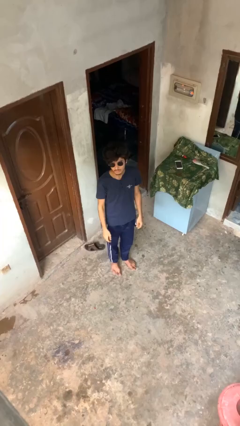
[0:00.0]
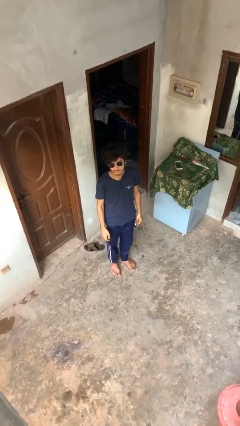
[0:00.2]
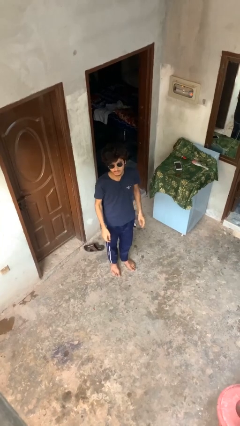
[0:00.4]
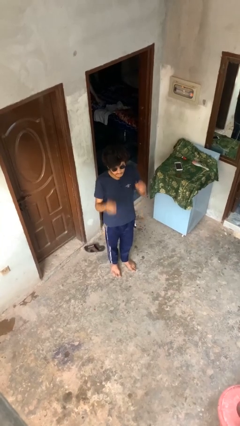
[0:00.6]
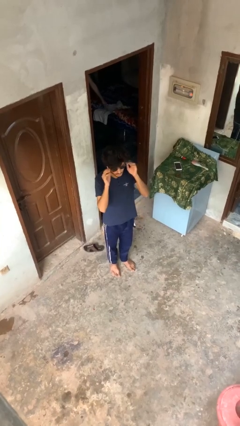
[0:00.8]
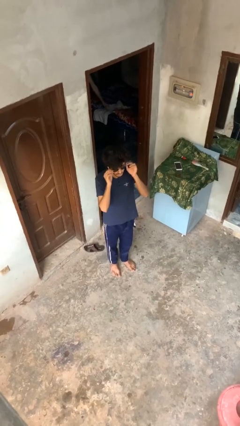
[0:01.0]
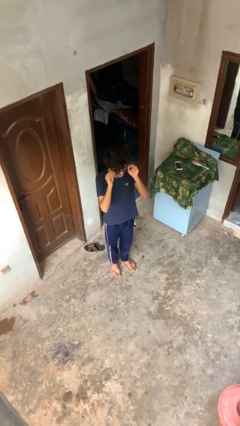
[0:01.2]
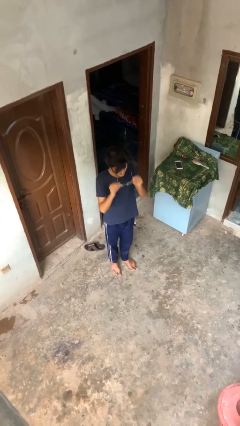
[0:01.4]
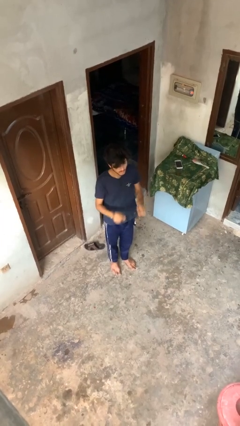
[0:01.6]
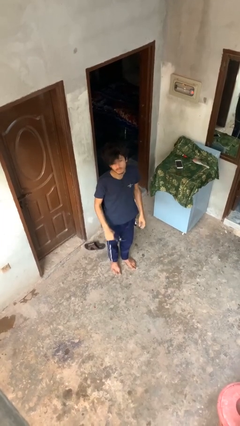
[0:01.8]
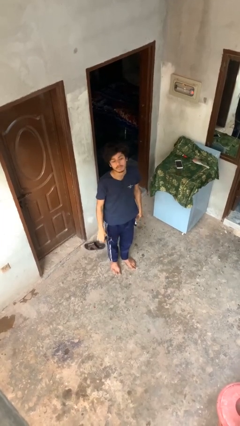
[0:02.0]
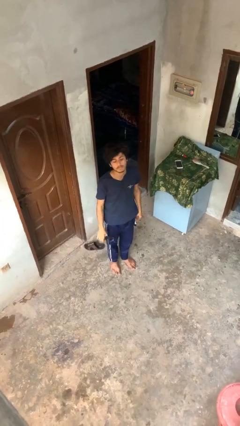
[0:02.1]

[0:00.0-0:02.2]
person takes off sunglasses

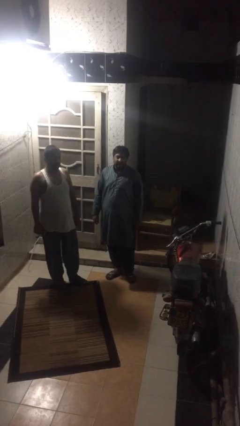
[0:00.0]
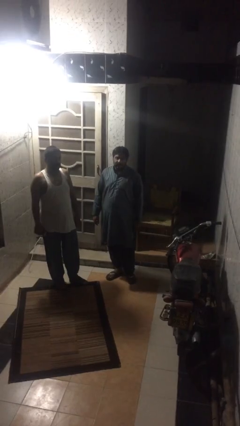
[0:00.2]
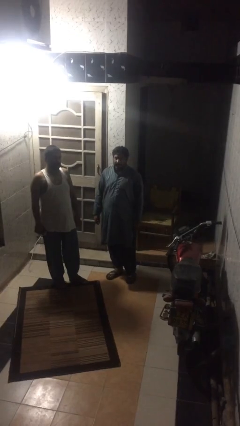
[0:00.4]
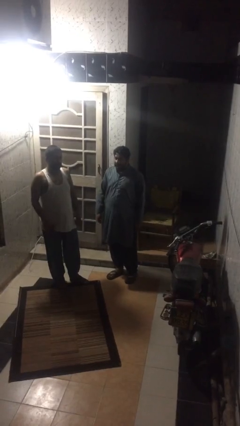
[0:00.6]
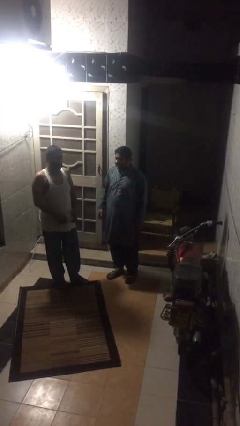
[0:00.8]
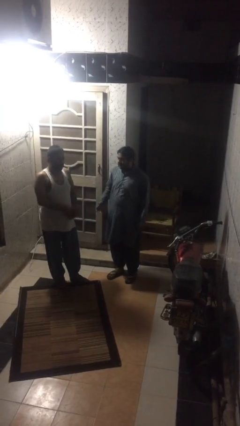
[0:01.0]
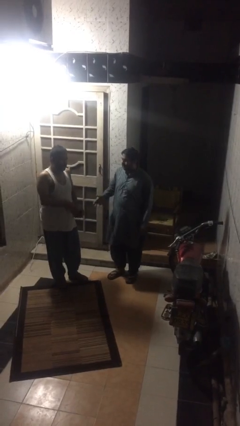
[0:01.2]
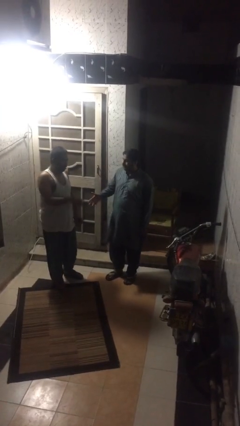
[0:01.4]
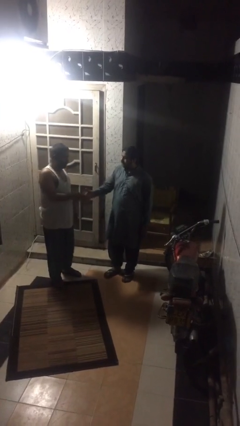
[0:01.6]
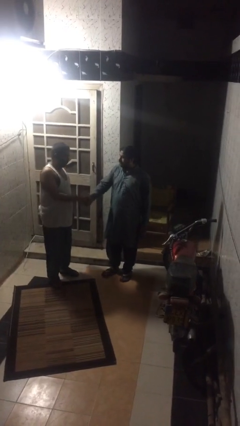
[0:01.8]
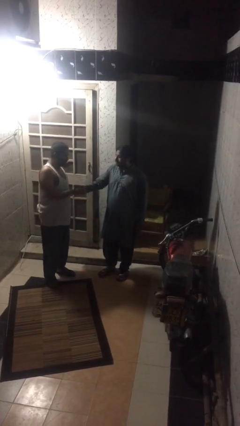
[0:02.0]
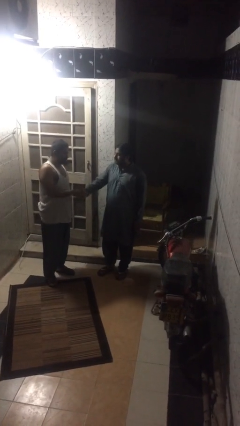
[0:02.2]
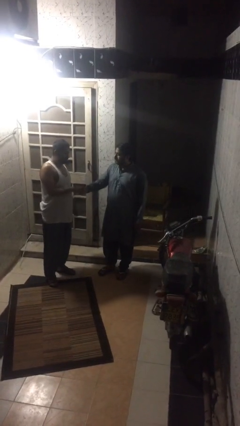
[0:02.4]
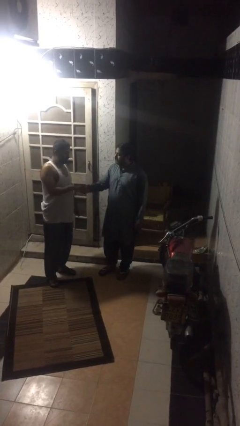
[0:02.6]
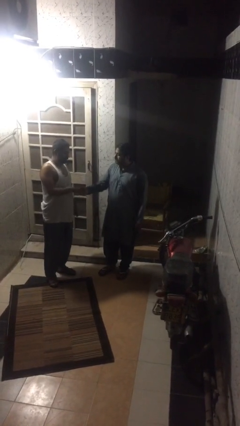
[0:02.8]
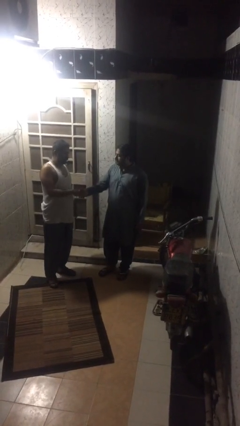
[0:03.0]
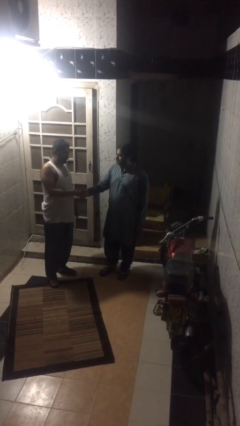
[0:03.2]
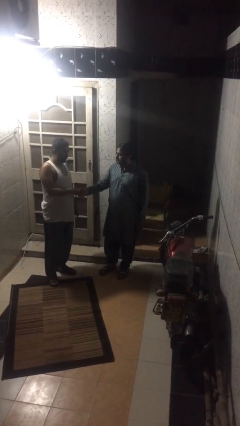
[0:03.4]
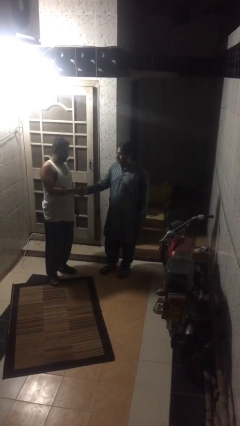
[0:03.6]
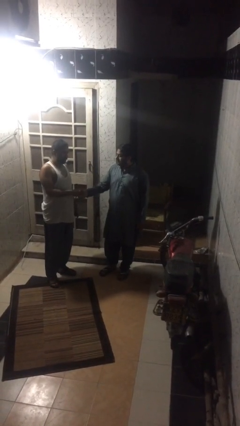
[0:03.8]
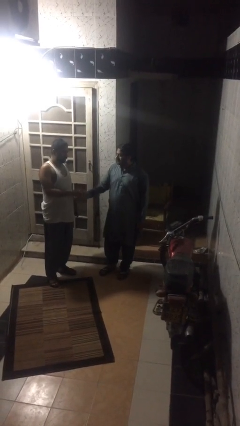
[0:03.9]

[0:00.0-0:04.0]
person shakes hand

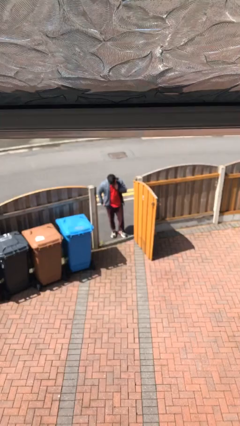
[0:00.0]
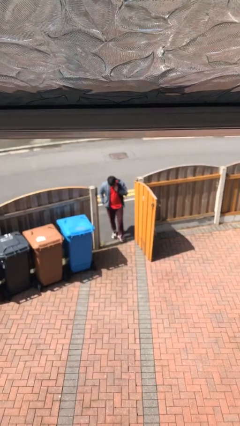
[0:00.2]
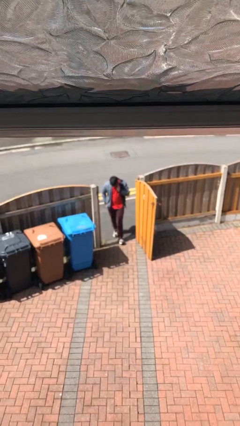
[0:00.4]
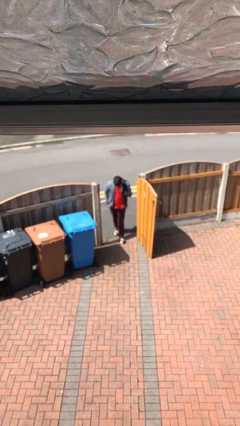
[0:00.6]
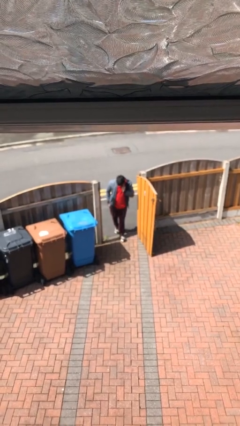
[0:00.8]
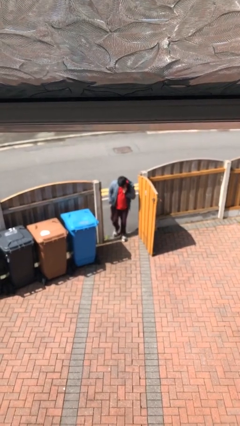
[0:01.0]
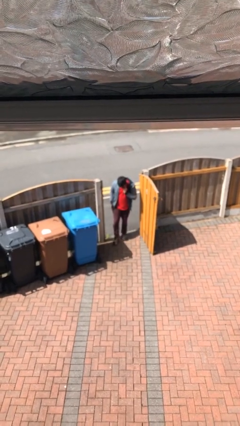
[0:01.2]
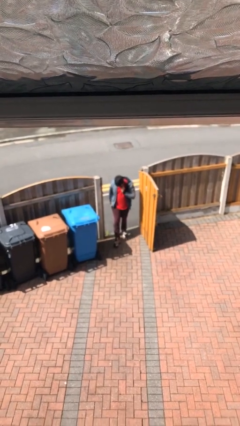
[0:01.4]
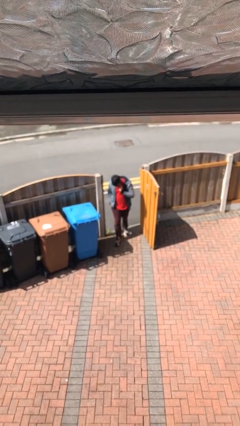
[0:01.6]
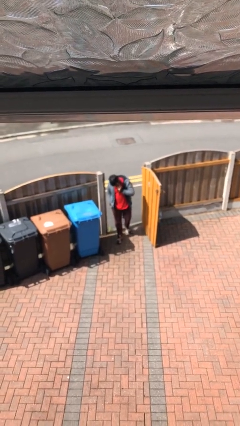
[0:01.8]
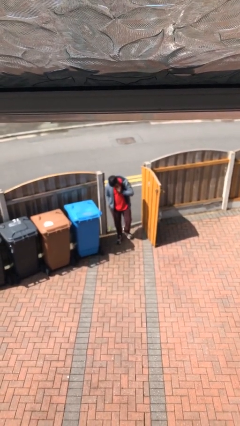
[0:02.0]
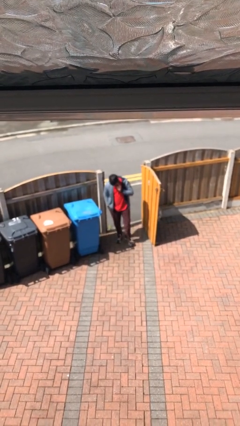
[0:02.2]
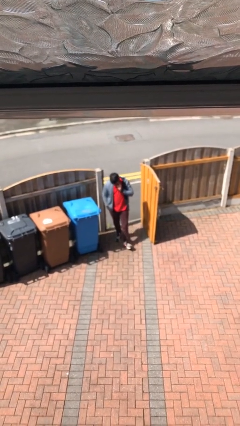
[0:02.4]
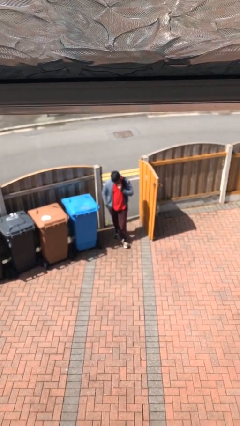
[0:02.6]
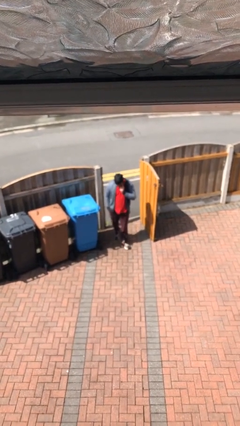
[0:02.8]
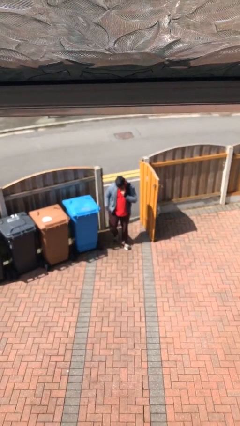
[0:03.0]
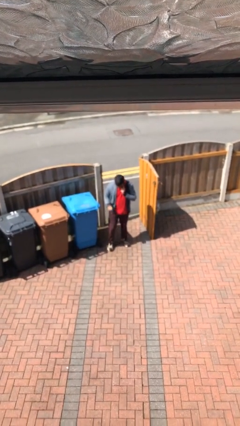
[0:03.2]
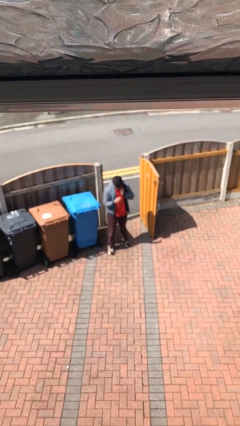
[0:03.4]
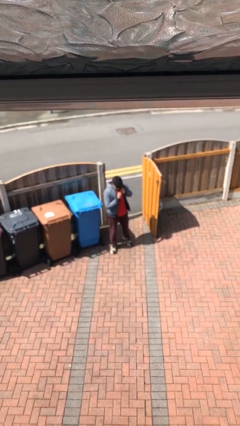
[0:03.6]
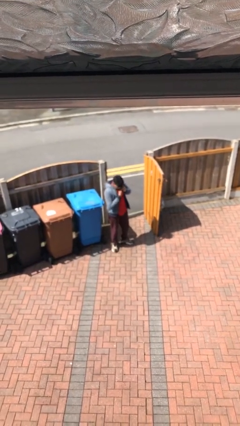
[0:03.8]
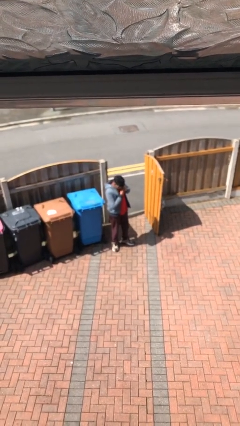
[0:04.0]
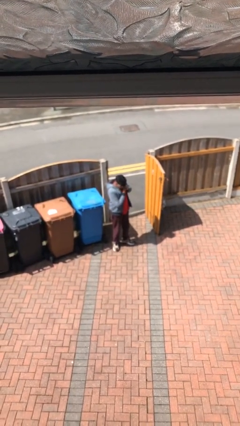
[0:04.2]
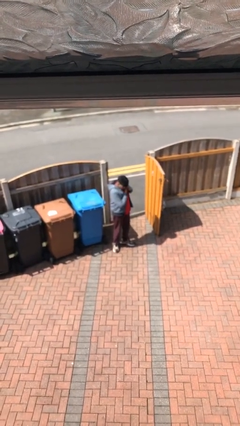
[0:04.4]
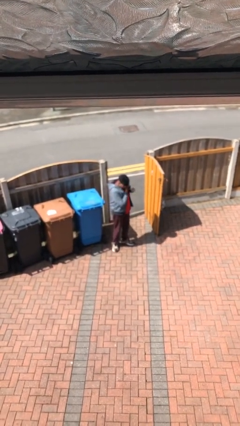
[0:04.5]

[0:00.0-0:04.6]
person enters scene through structure

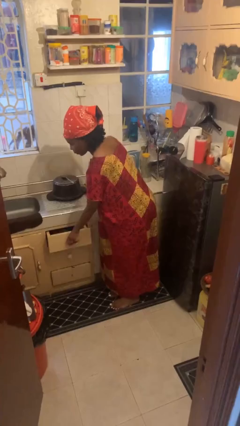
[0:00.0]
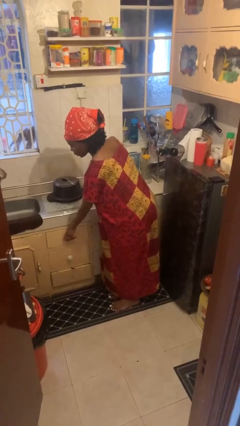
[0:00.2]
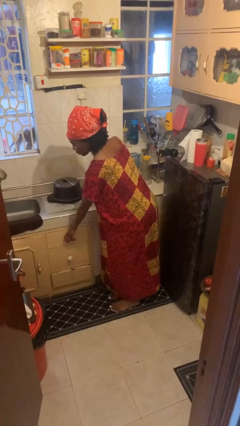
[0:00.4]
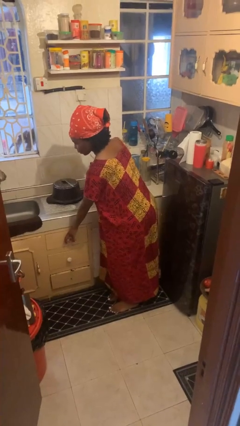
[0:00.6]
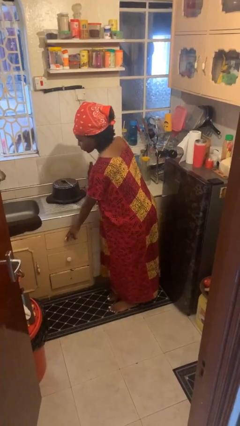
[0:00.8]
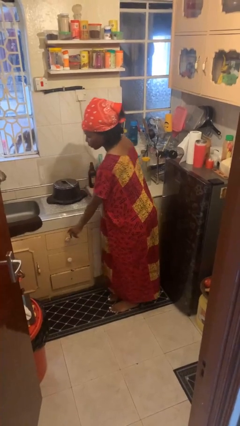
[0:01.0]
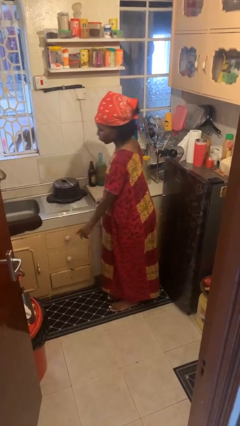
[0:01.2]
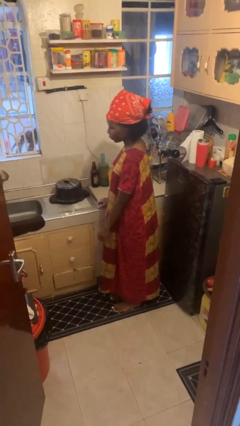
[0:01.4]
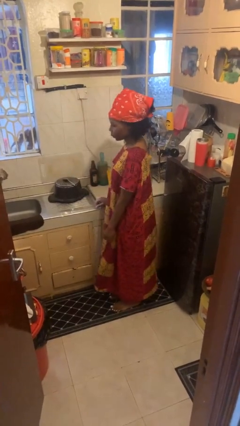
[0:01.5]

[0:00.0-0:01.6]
person closes kitchen drawer

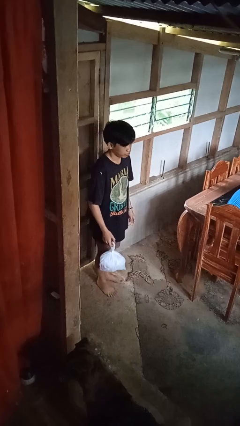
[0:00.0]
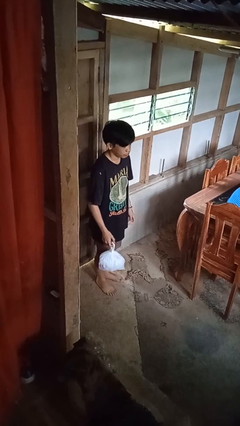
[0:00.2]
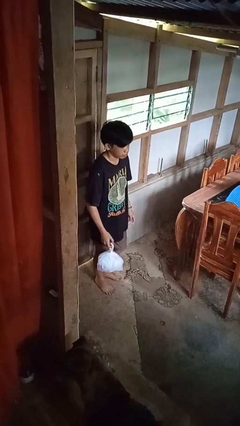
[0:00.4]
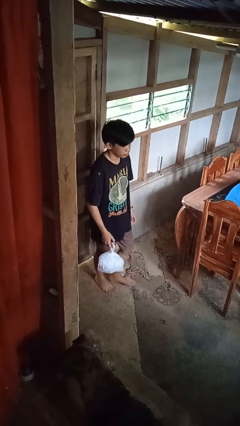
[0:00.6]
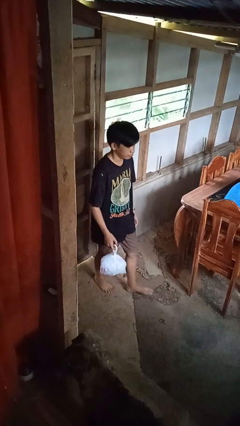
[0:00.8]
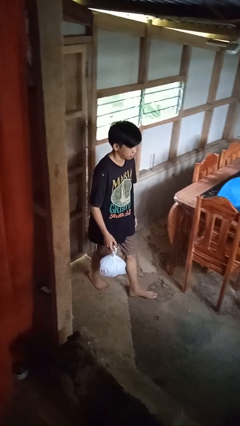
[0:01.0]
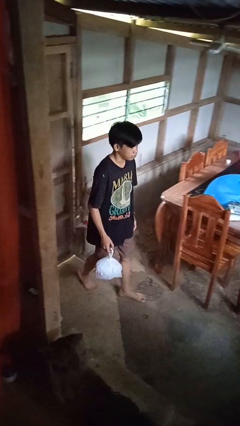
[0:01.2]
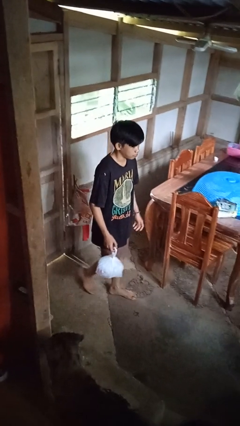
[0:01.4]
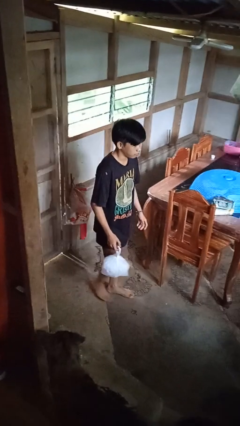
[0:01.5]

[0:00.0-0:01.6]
person carries groceries

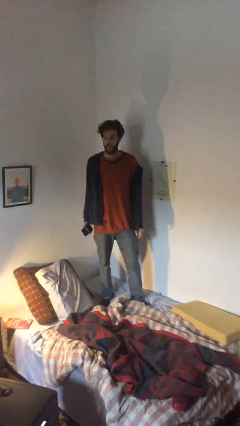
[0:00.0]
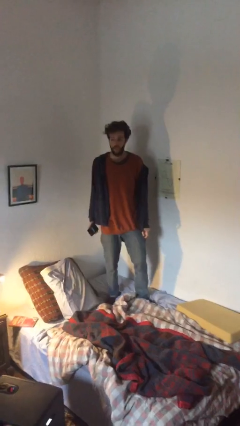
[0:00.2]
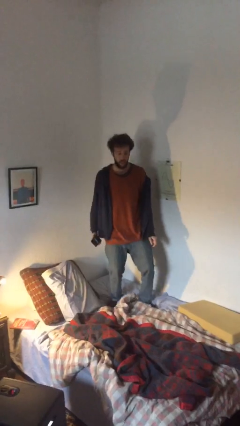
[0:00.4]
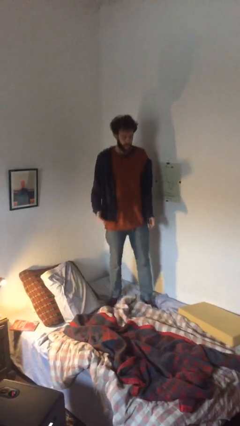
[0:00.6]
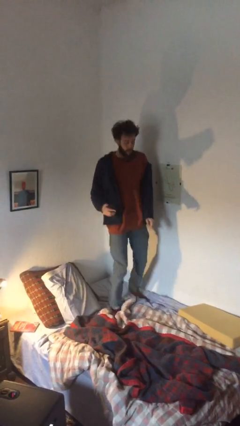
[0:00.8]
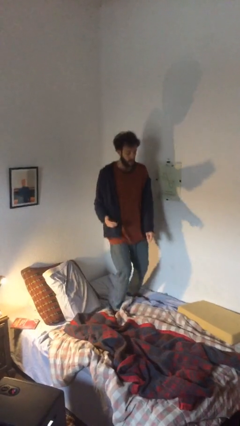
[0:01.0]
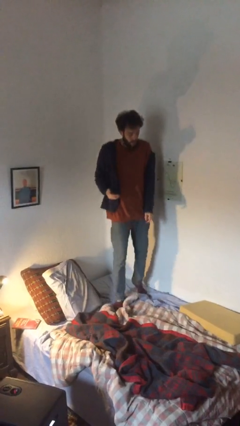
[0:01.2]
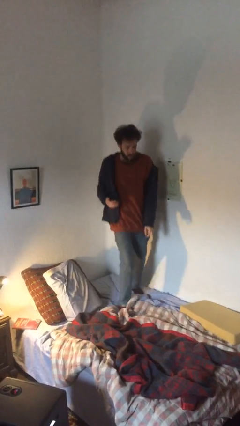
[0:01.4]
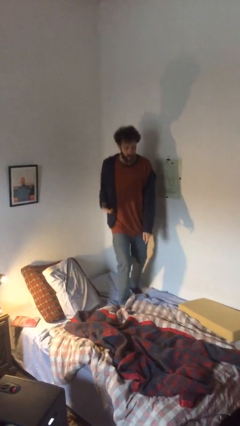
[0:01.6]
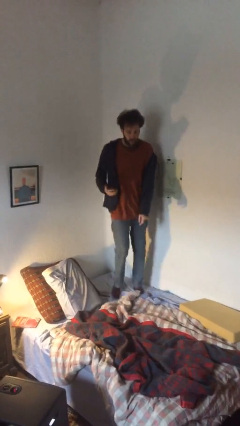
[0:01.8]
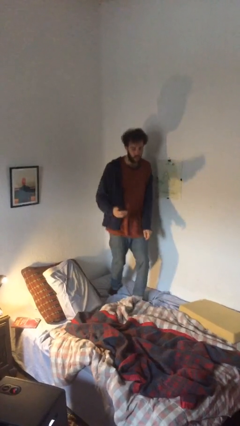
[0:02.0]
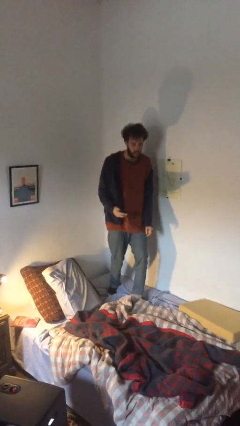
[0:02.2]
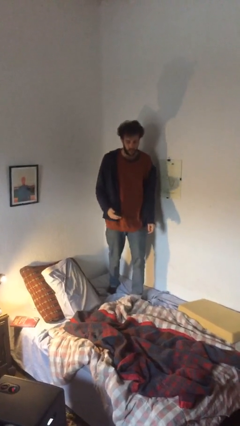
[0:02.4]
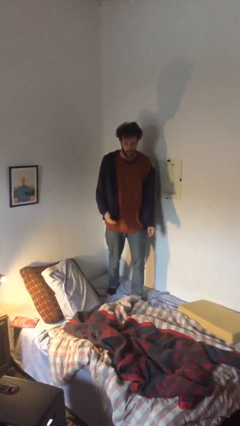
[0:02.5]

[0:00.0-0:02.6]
person jumps on bed

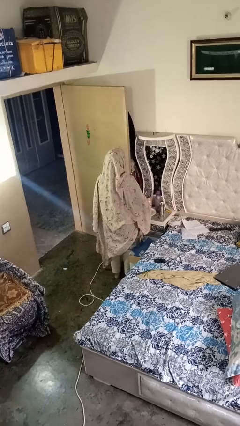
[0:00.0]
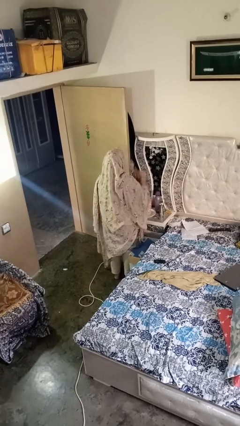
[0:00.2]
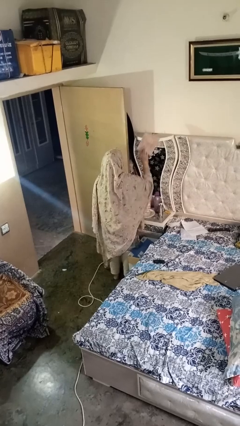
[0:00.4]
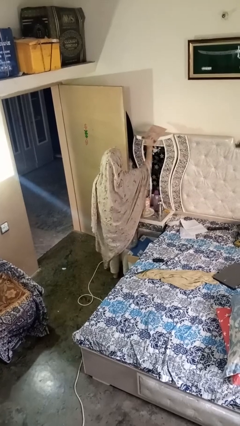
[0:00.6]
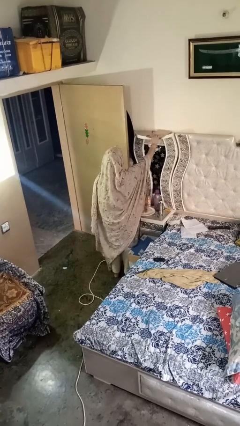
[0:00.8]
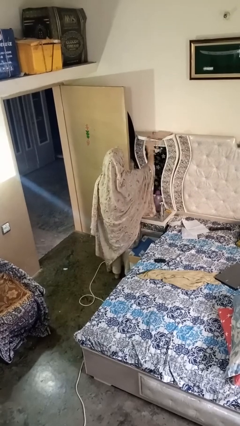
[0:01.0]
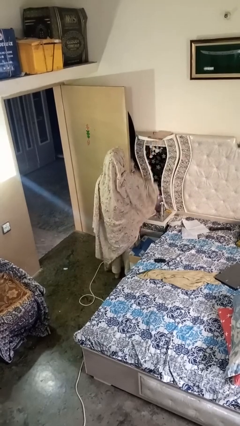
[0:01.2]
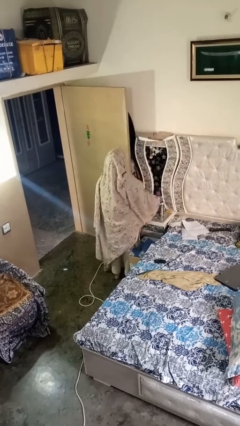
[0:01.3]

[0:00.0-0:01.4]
person puts down object on shelf
